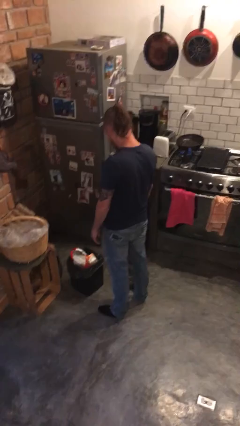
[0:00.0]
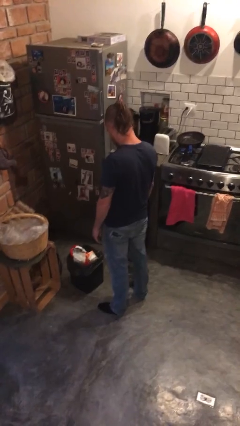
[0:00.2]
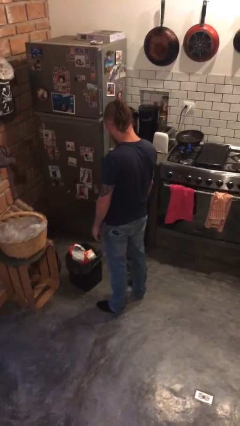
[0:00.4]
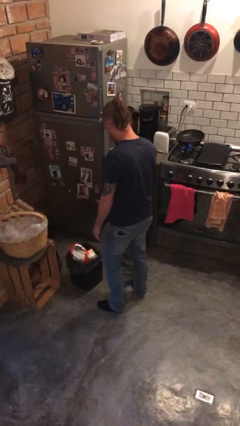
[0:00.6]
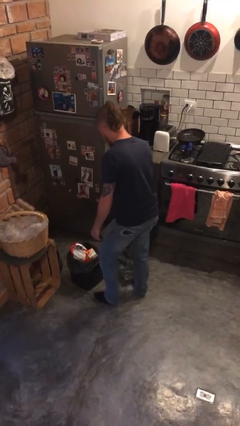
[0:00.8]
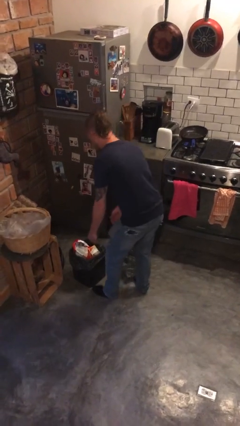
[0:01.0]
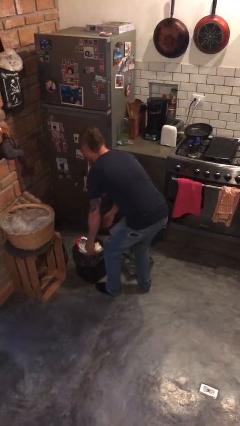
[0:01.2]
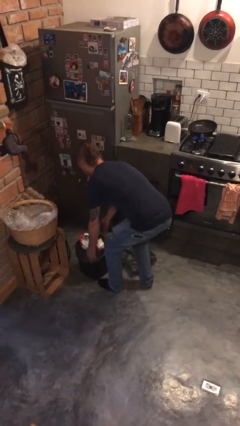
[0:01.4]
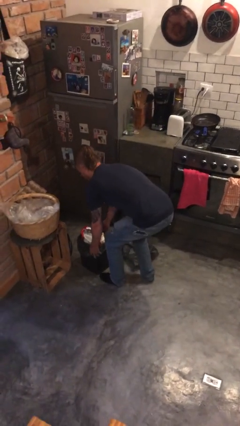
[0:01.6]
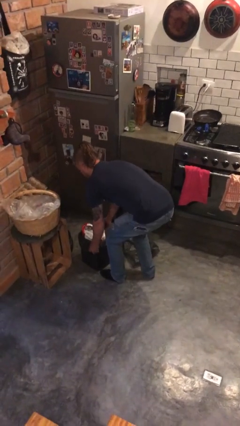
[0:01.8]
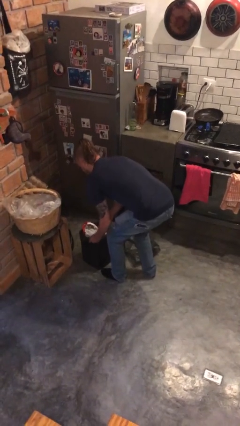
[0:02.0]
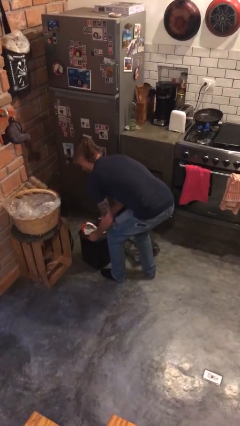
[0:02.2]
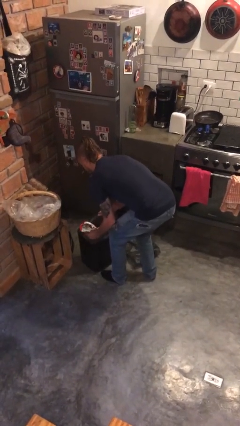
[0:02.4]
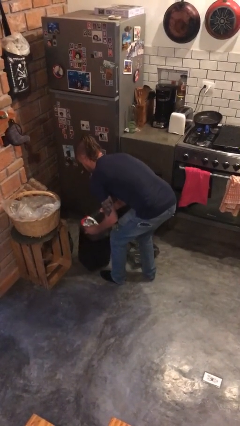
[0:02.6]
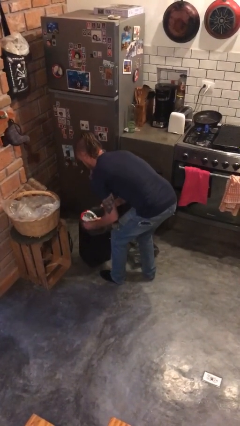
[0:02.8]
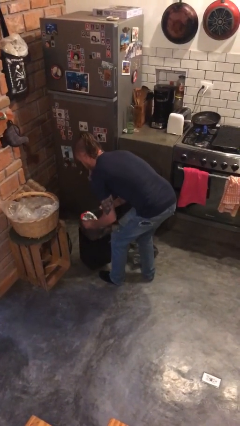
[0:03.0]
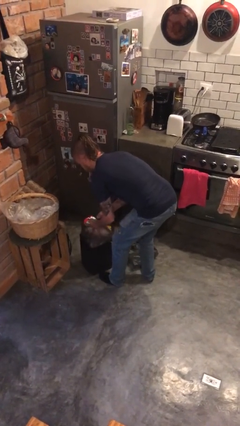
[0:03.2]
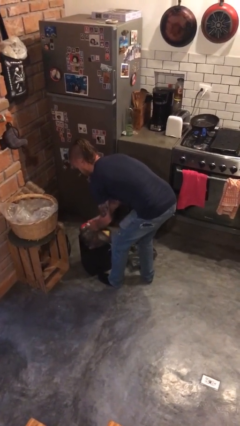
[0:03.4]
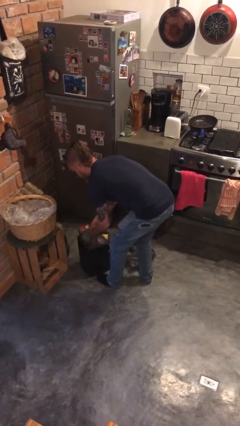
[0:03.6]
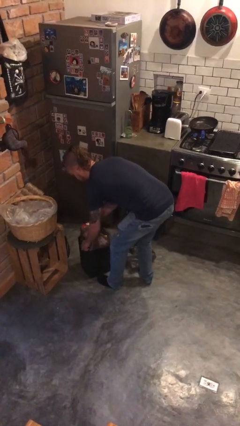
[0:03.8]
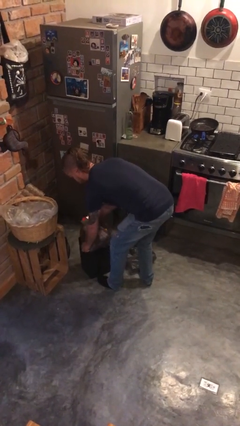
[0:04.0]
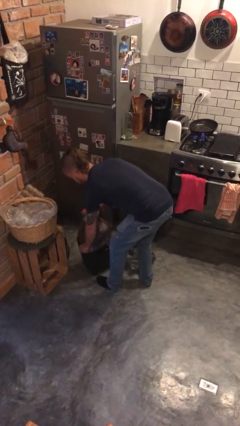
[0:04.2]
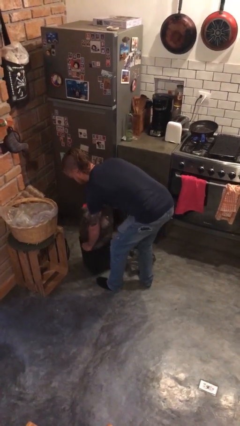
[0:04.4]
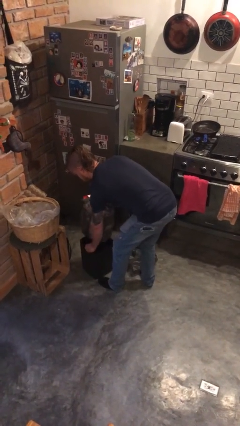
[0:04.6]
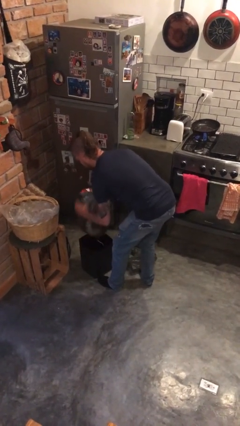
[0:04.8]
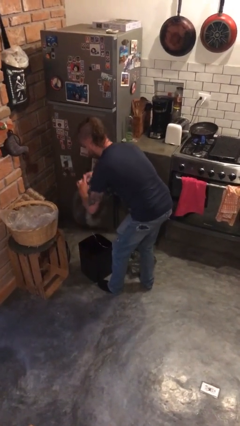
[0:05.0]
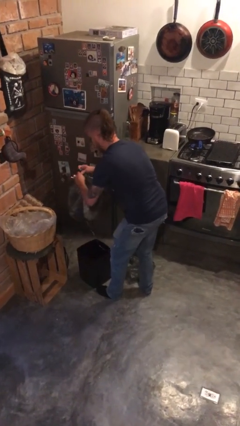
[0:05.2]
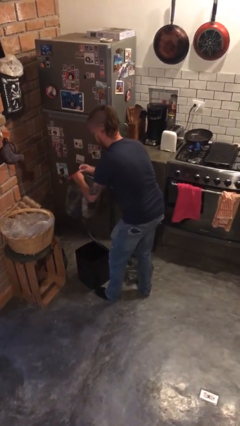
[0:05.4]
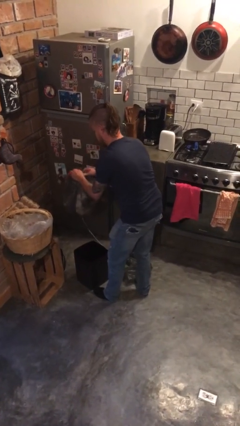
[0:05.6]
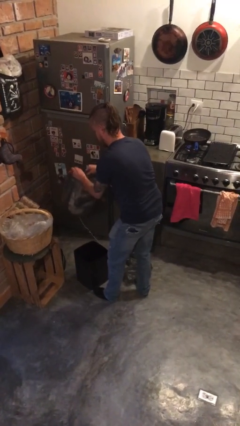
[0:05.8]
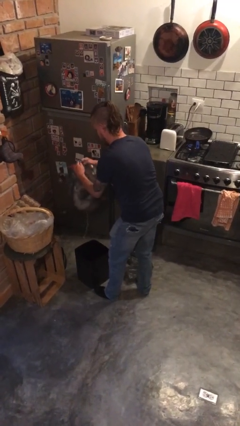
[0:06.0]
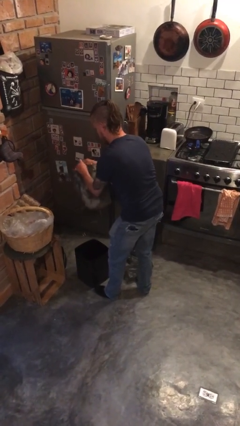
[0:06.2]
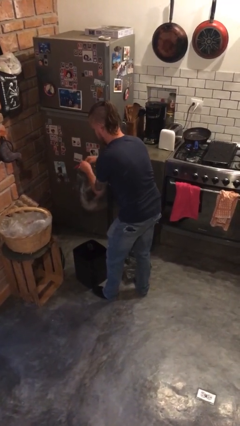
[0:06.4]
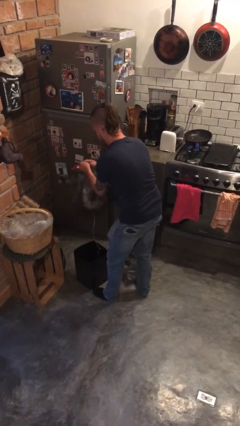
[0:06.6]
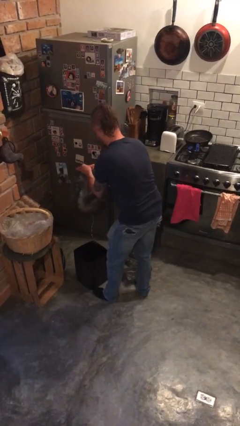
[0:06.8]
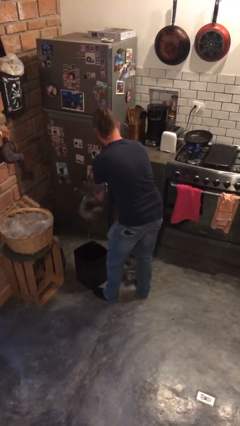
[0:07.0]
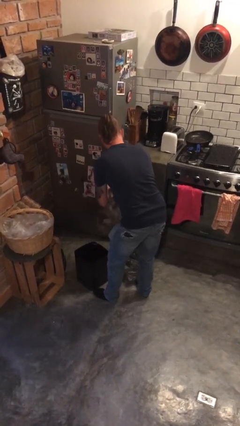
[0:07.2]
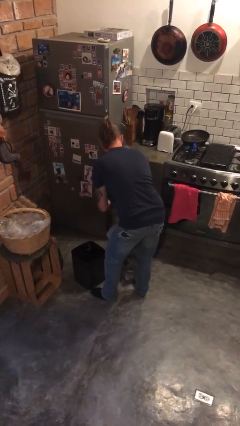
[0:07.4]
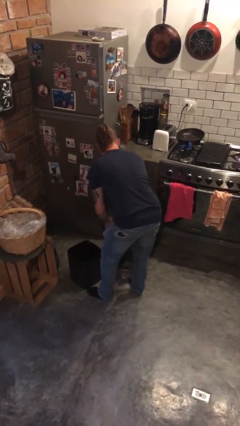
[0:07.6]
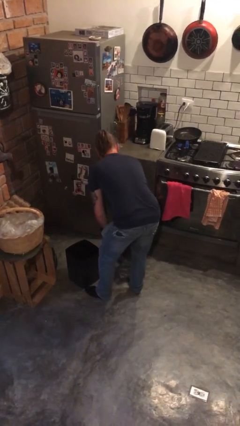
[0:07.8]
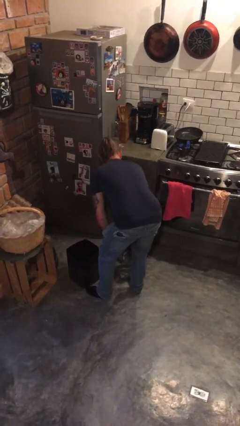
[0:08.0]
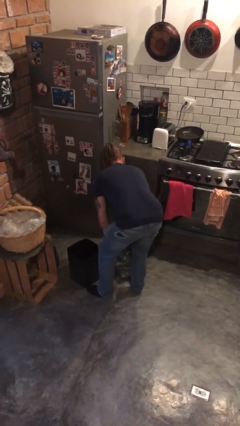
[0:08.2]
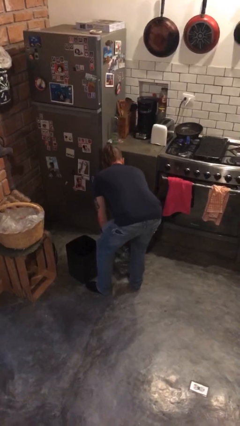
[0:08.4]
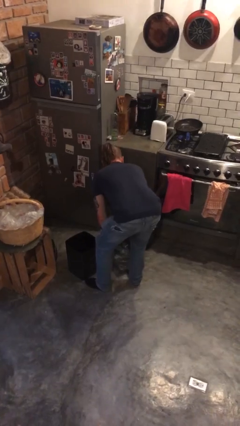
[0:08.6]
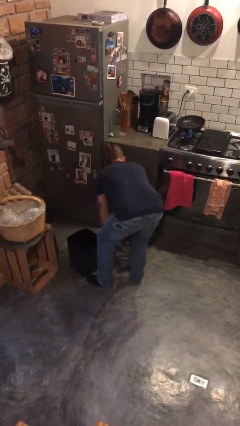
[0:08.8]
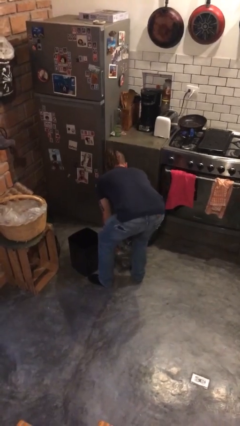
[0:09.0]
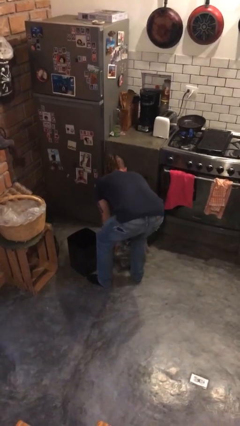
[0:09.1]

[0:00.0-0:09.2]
person removes trashbag from trashcan

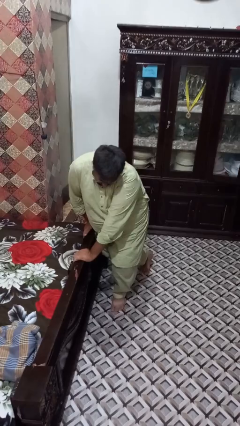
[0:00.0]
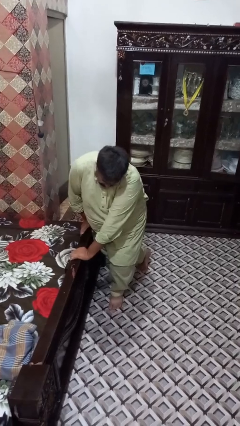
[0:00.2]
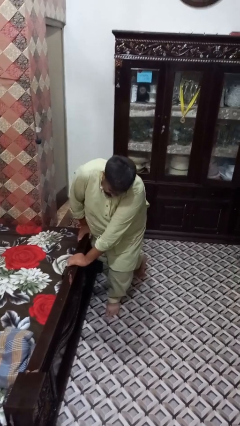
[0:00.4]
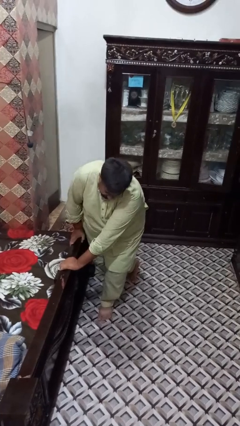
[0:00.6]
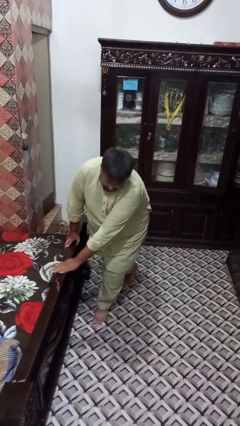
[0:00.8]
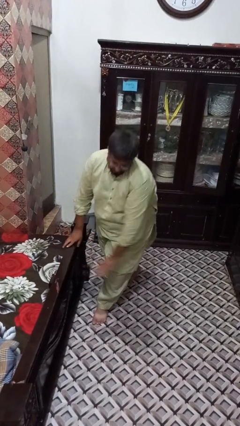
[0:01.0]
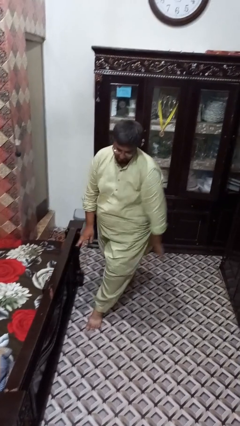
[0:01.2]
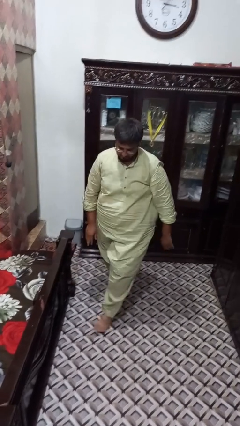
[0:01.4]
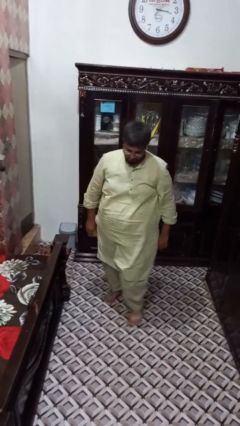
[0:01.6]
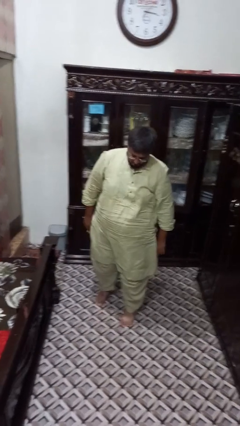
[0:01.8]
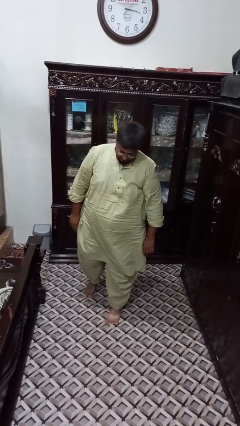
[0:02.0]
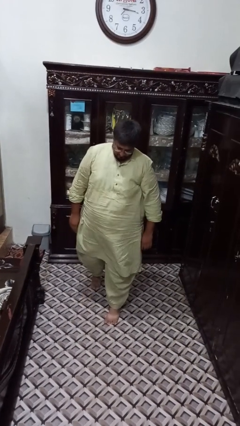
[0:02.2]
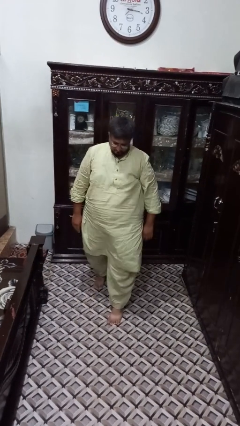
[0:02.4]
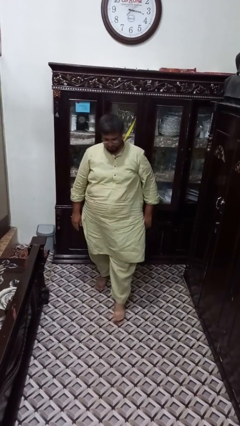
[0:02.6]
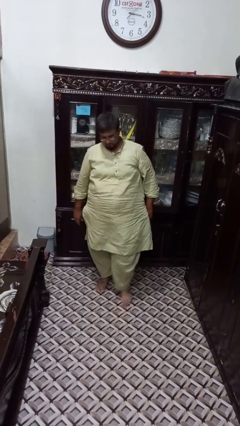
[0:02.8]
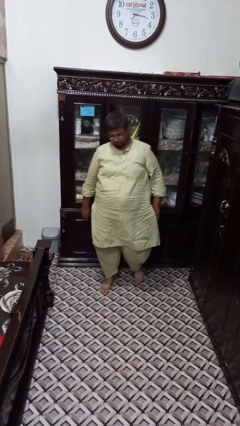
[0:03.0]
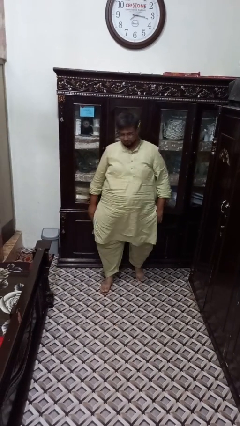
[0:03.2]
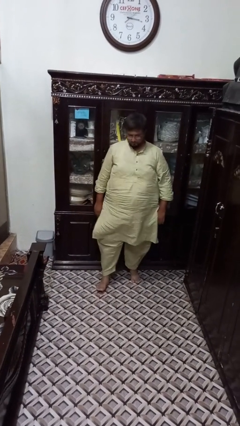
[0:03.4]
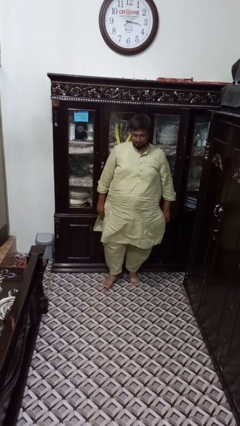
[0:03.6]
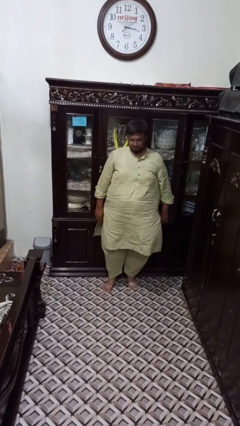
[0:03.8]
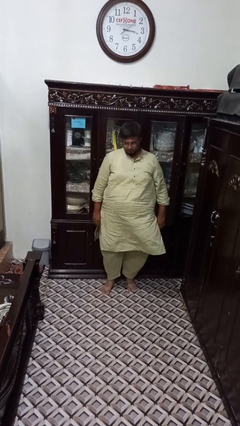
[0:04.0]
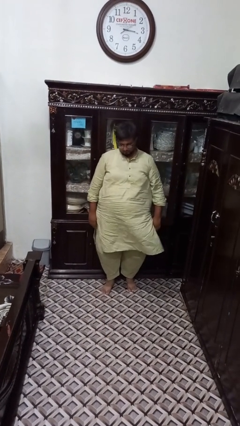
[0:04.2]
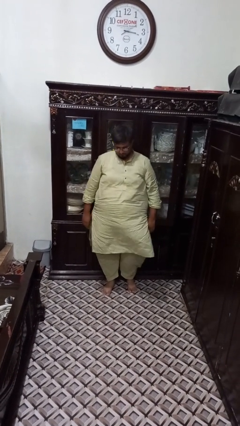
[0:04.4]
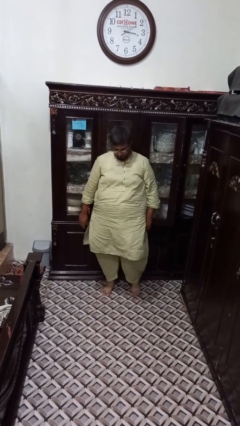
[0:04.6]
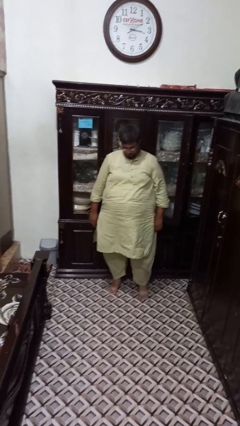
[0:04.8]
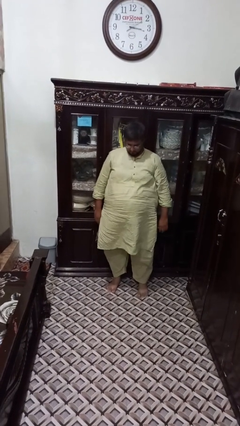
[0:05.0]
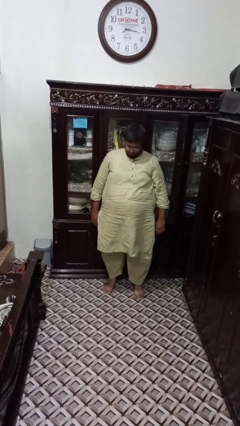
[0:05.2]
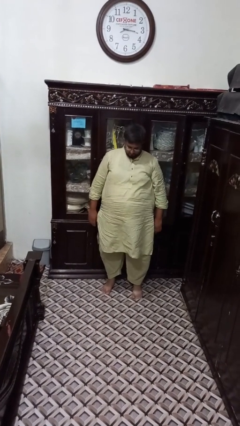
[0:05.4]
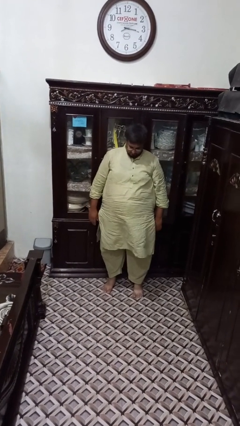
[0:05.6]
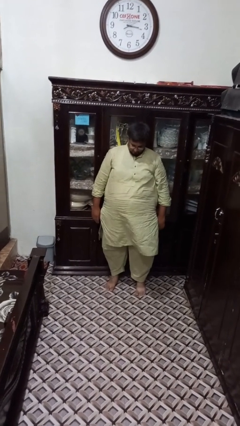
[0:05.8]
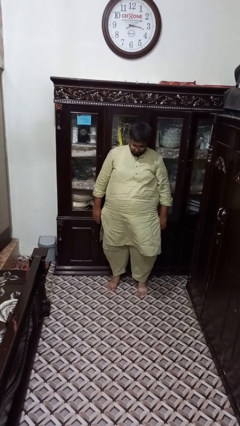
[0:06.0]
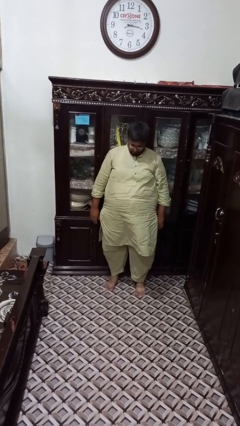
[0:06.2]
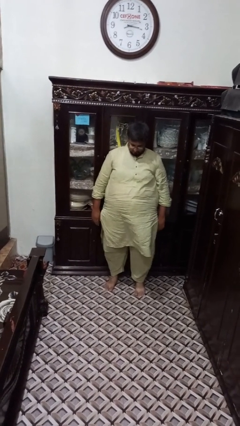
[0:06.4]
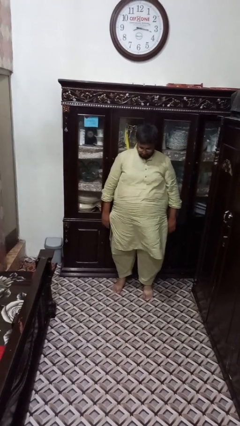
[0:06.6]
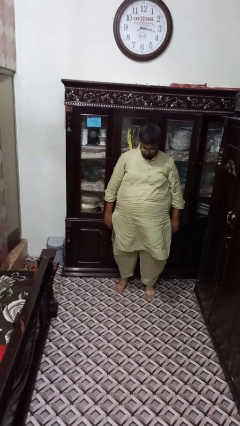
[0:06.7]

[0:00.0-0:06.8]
person stands up from floor

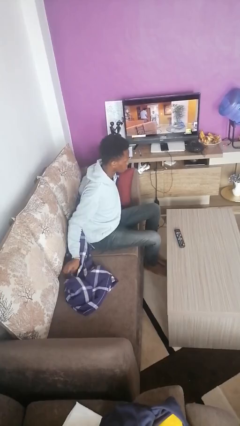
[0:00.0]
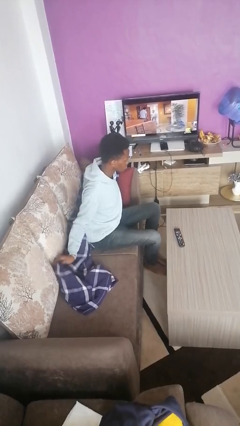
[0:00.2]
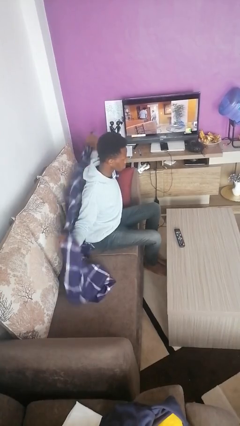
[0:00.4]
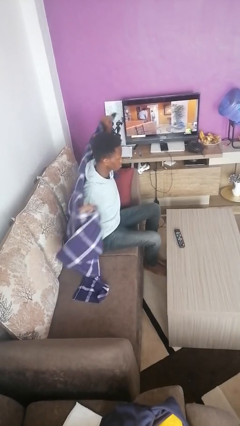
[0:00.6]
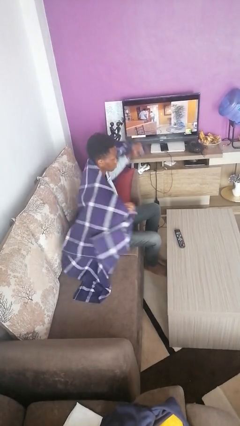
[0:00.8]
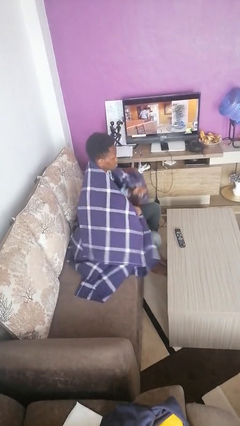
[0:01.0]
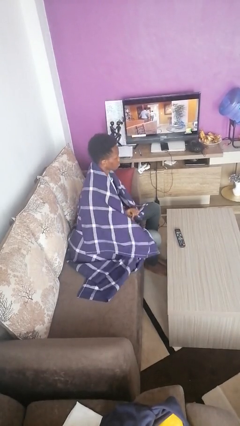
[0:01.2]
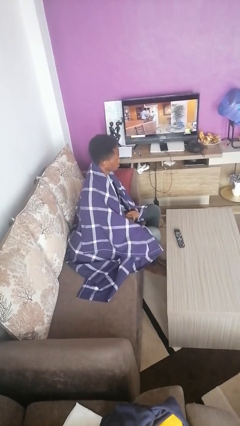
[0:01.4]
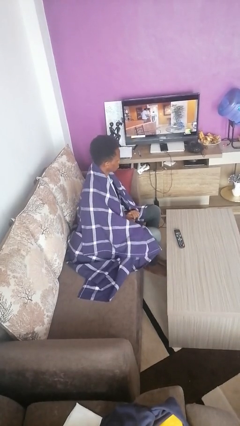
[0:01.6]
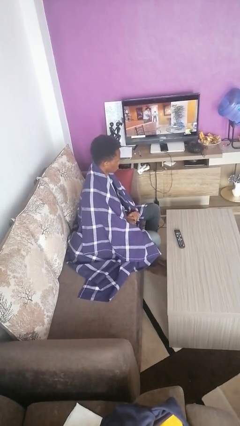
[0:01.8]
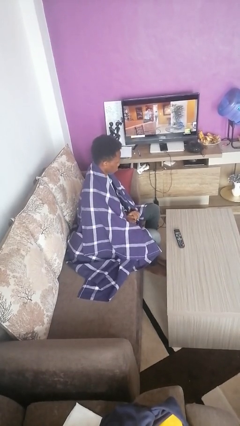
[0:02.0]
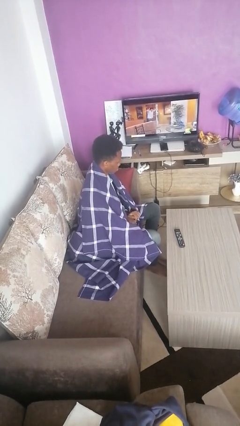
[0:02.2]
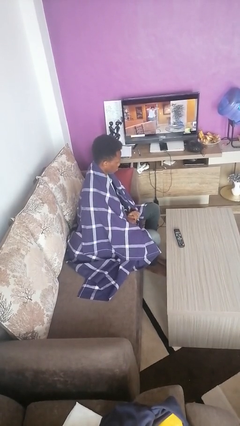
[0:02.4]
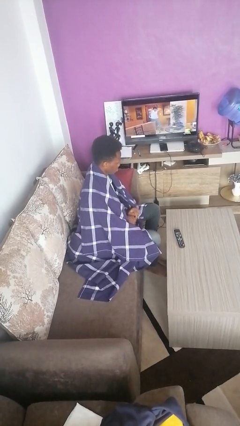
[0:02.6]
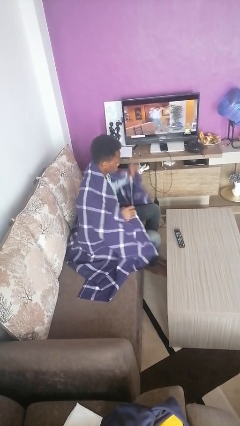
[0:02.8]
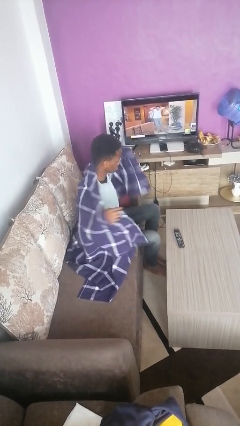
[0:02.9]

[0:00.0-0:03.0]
person covers with blanket
